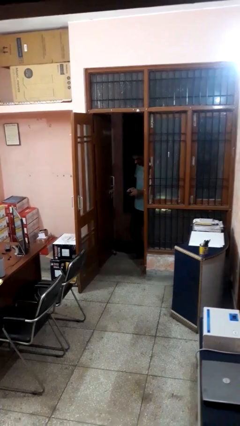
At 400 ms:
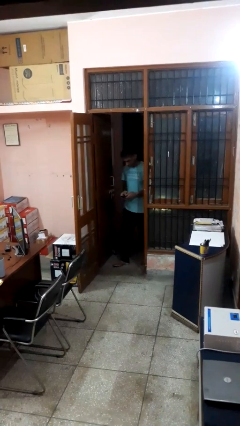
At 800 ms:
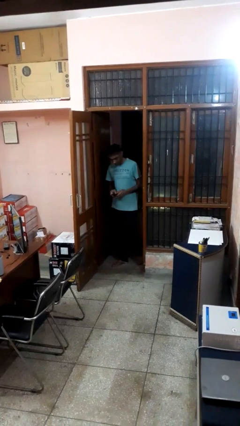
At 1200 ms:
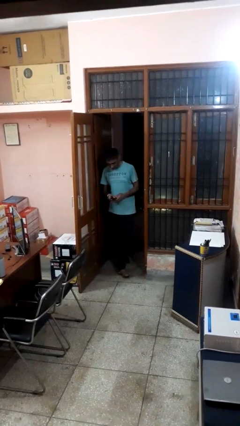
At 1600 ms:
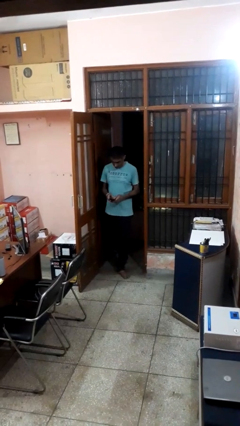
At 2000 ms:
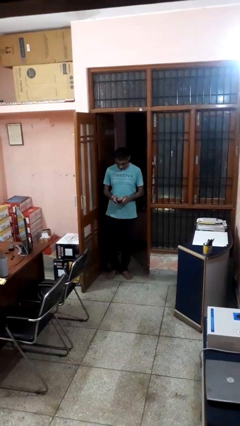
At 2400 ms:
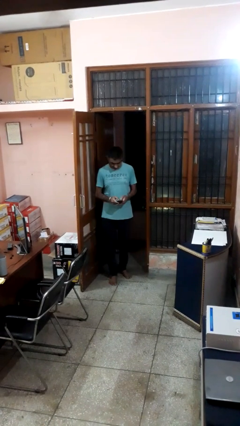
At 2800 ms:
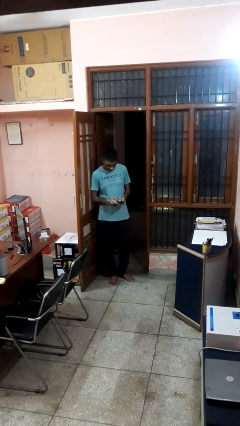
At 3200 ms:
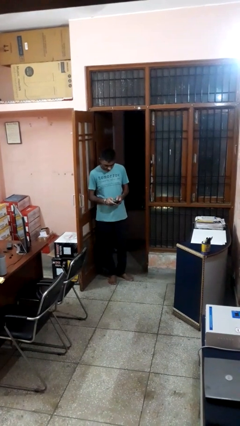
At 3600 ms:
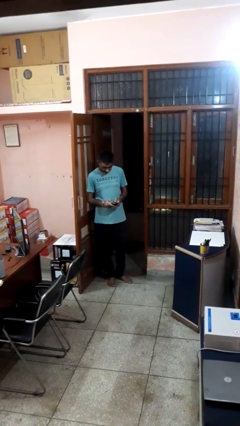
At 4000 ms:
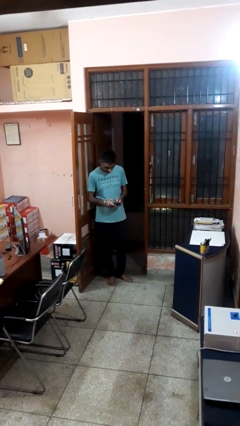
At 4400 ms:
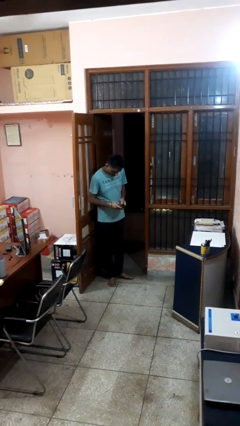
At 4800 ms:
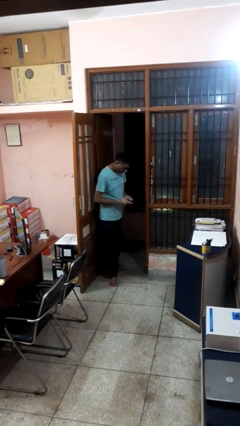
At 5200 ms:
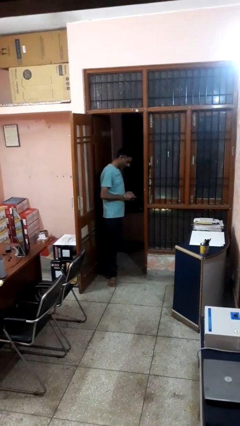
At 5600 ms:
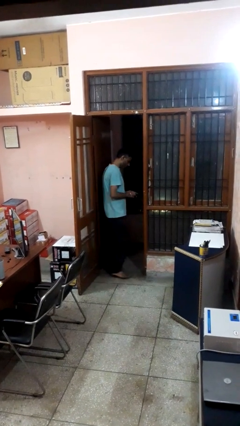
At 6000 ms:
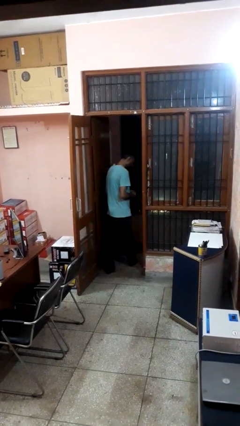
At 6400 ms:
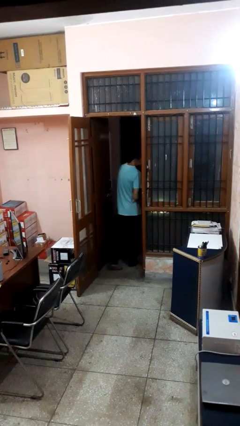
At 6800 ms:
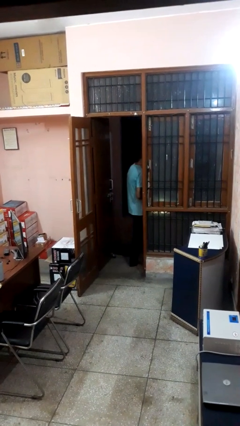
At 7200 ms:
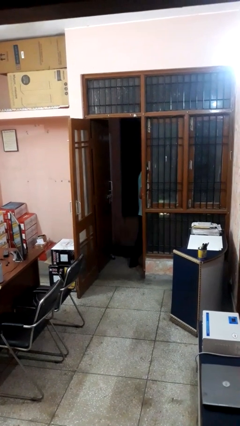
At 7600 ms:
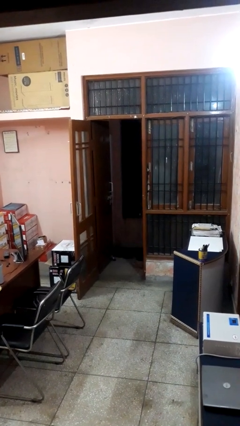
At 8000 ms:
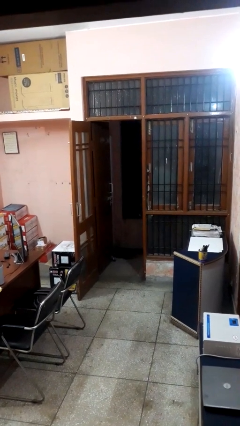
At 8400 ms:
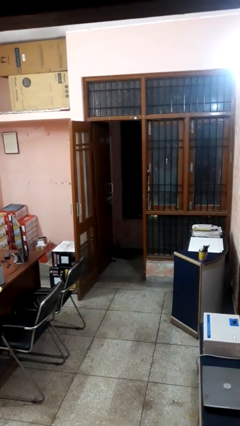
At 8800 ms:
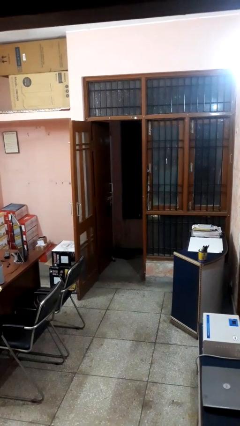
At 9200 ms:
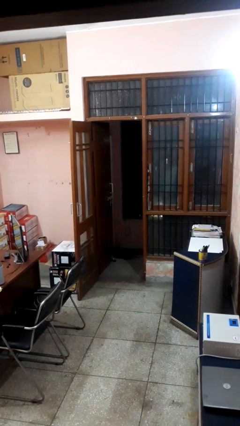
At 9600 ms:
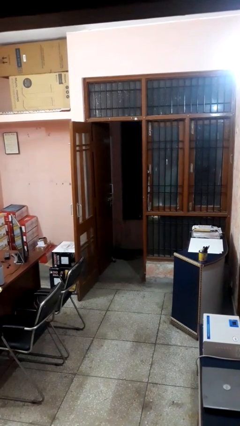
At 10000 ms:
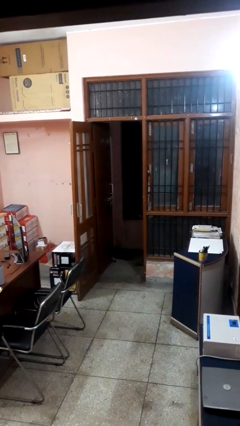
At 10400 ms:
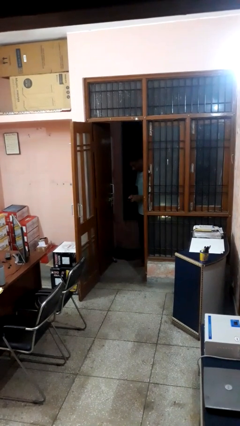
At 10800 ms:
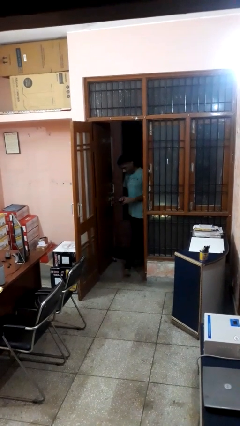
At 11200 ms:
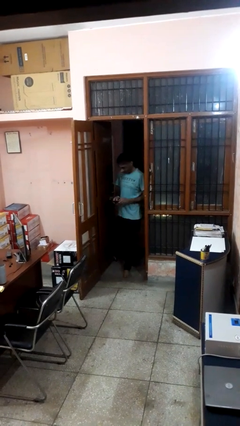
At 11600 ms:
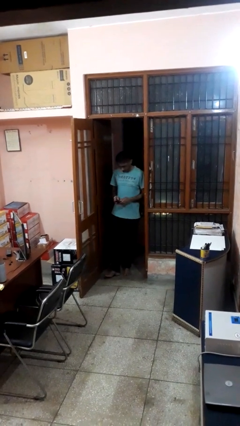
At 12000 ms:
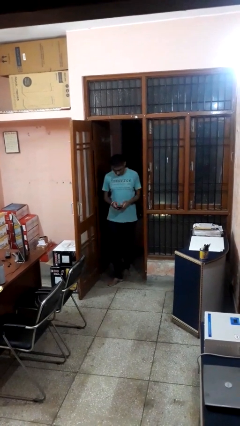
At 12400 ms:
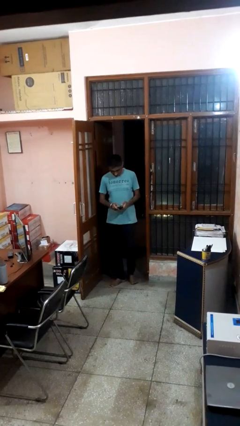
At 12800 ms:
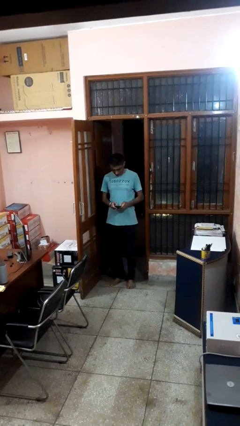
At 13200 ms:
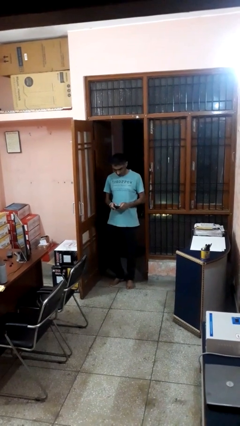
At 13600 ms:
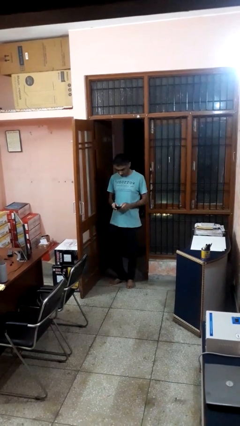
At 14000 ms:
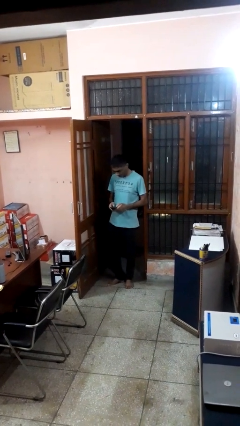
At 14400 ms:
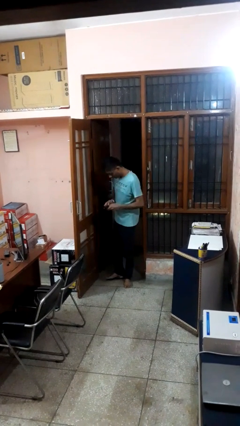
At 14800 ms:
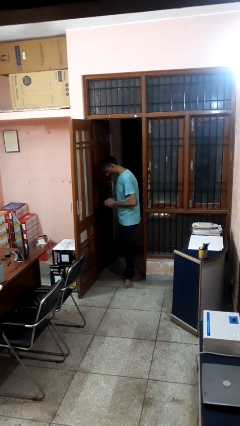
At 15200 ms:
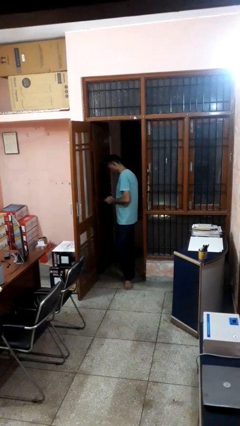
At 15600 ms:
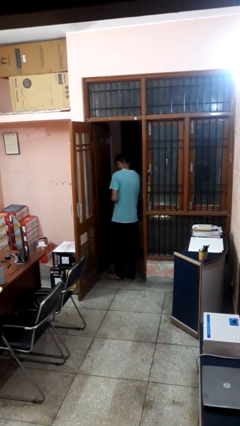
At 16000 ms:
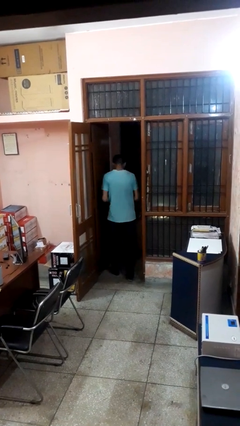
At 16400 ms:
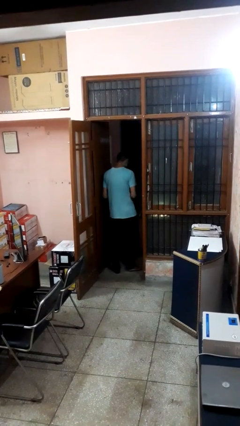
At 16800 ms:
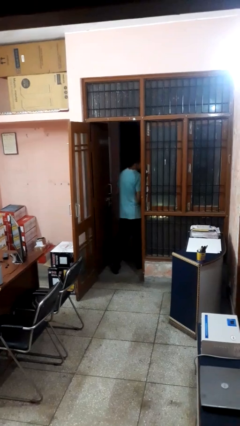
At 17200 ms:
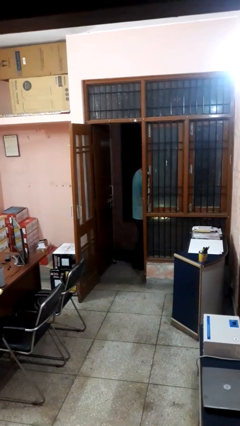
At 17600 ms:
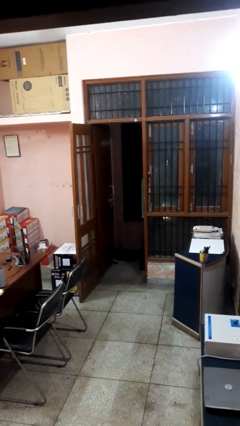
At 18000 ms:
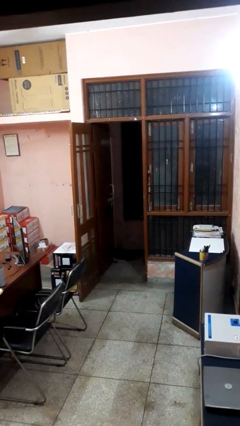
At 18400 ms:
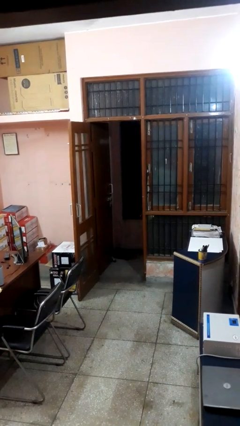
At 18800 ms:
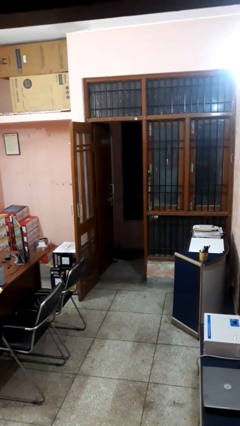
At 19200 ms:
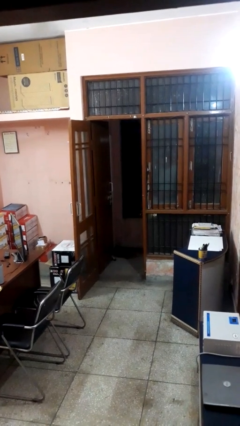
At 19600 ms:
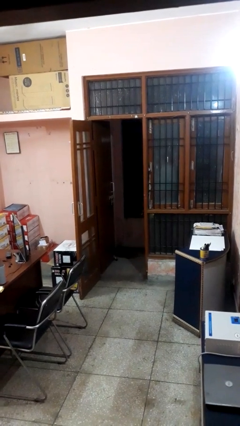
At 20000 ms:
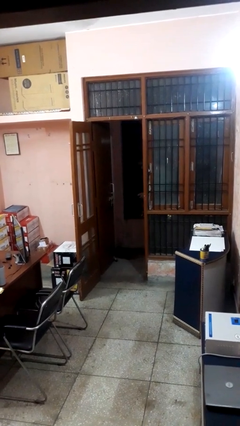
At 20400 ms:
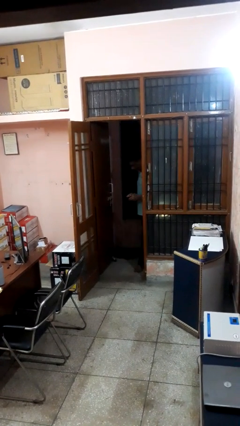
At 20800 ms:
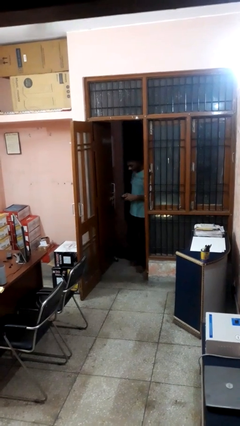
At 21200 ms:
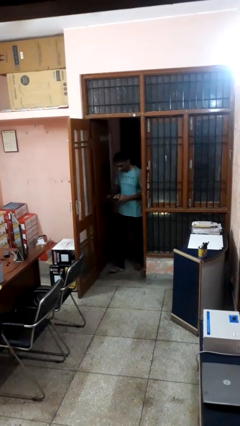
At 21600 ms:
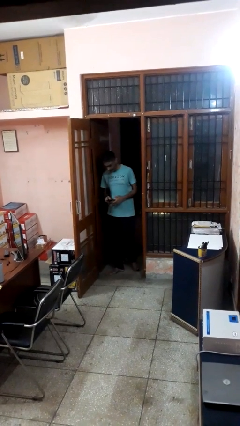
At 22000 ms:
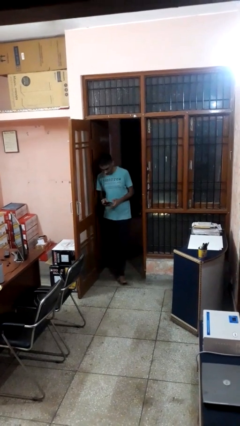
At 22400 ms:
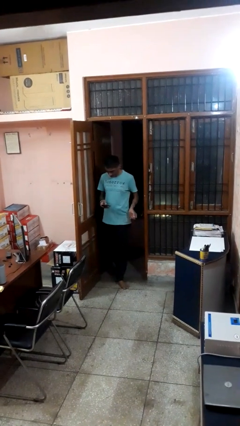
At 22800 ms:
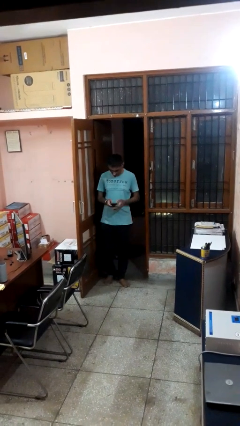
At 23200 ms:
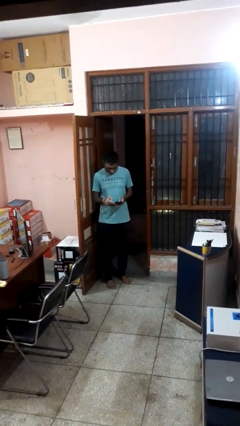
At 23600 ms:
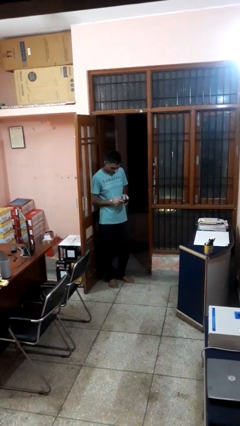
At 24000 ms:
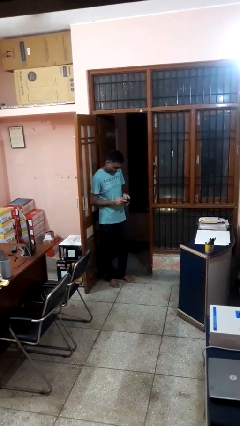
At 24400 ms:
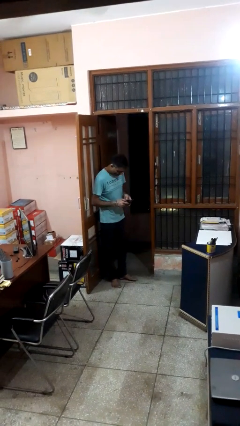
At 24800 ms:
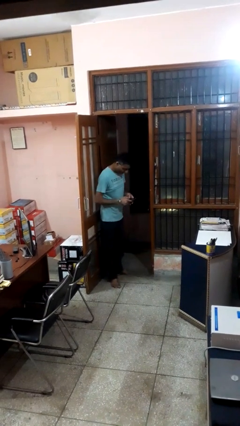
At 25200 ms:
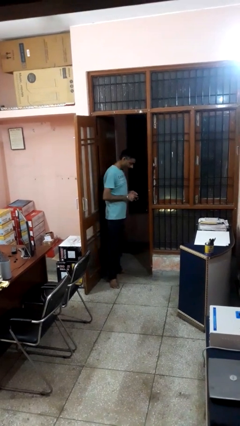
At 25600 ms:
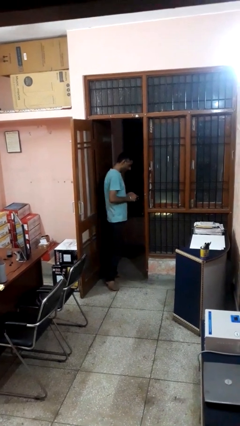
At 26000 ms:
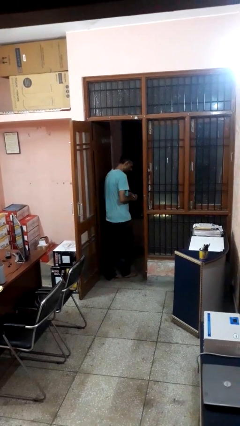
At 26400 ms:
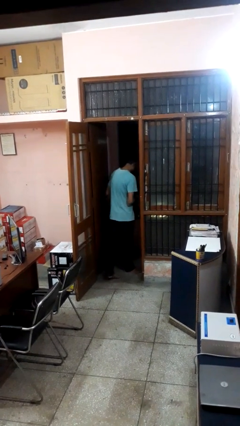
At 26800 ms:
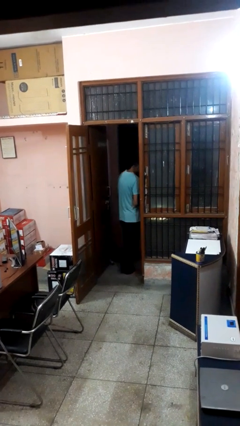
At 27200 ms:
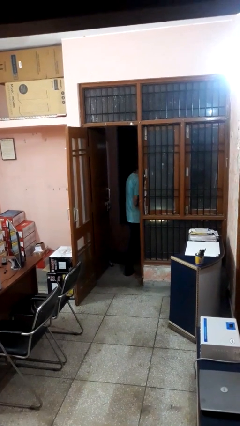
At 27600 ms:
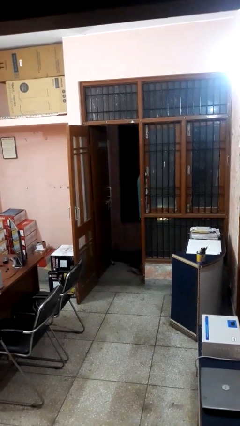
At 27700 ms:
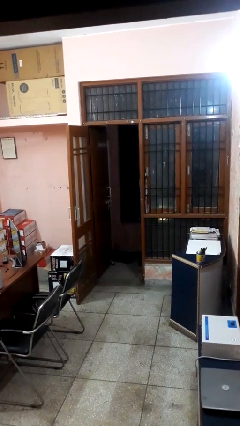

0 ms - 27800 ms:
person texts on phone

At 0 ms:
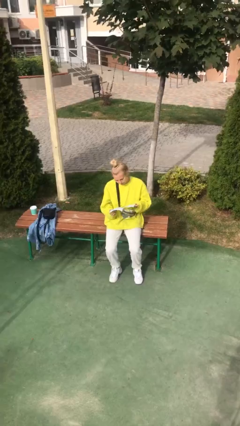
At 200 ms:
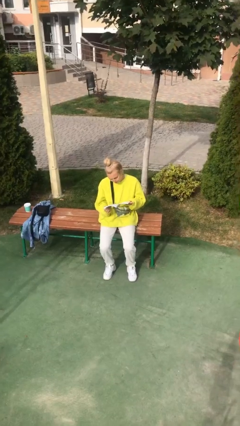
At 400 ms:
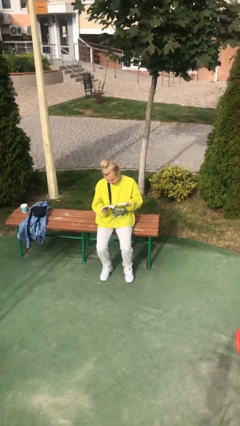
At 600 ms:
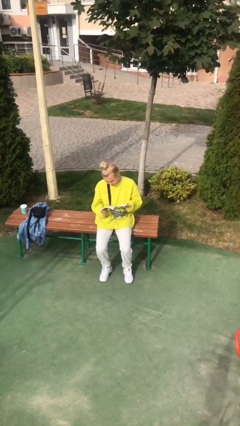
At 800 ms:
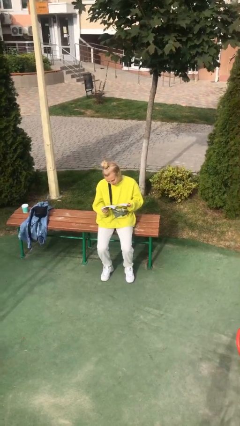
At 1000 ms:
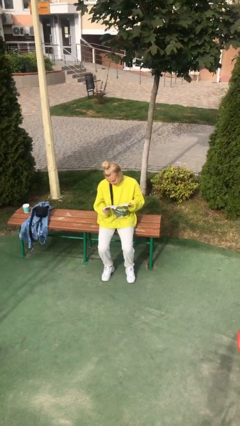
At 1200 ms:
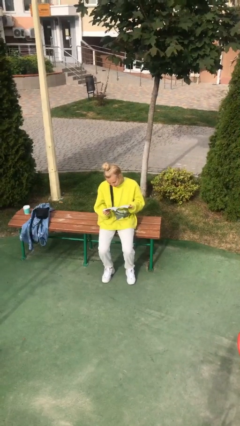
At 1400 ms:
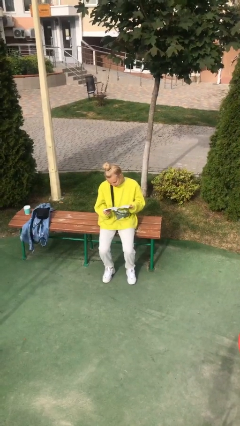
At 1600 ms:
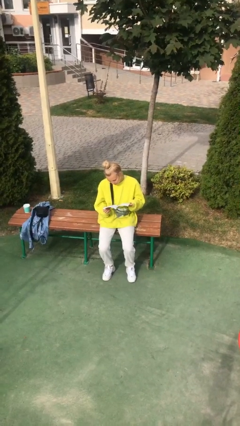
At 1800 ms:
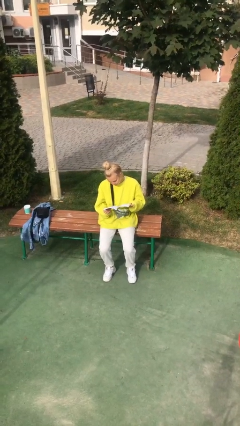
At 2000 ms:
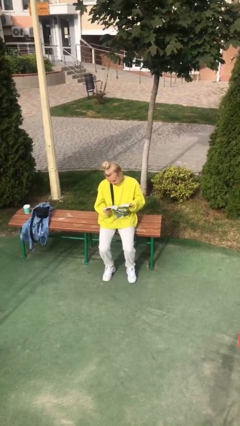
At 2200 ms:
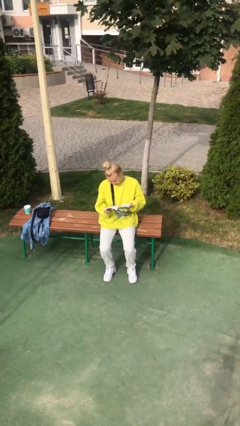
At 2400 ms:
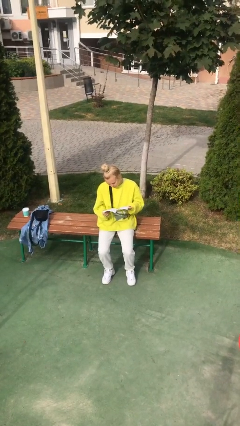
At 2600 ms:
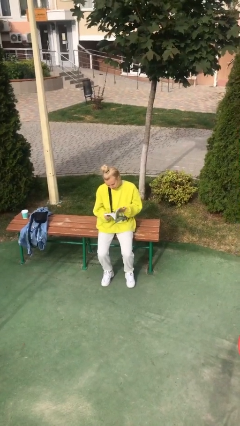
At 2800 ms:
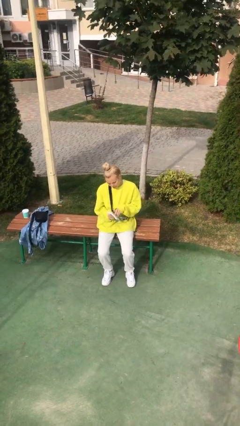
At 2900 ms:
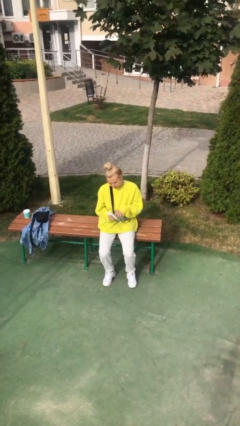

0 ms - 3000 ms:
person reads document

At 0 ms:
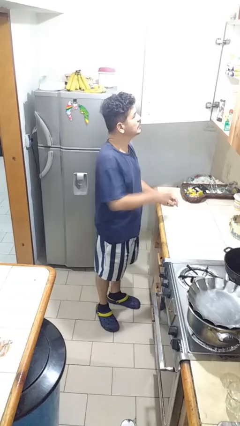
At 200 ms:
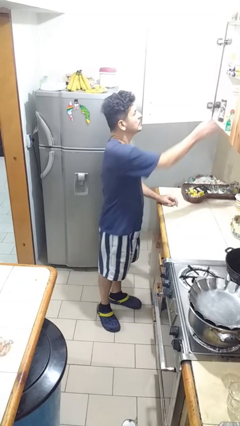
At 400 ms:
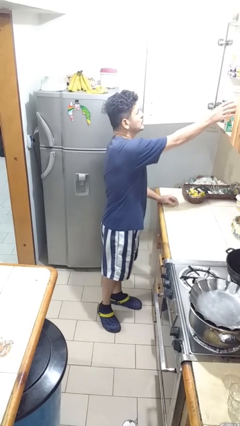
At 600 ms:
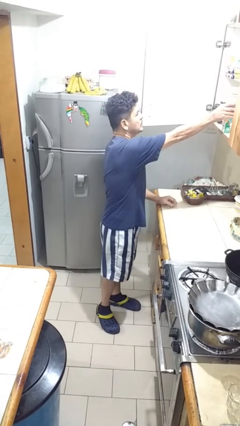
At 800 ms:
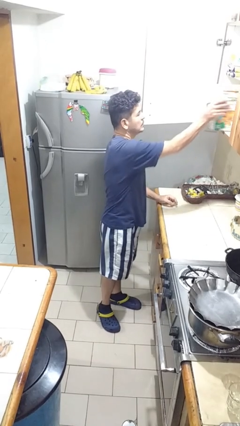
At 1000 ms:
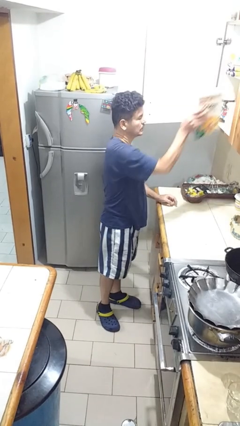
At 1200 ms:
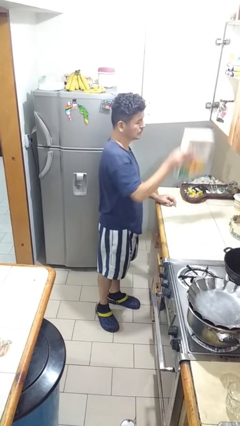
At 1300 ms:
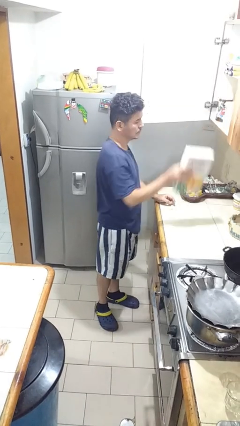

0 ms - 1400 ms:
person takes object from cabinet
